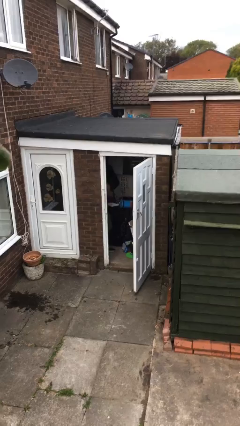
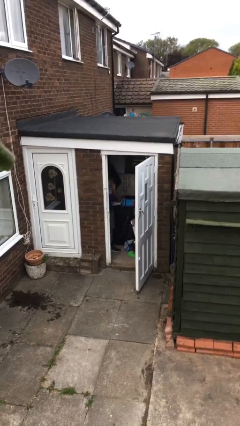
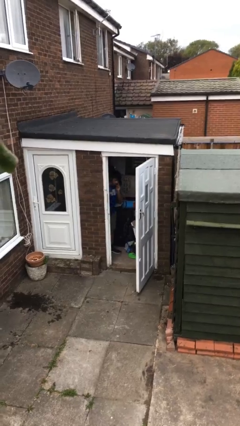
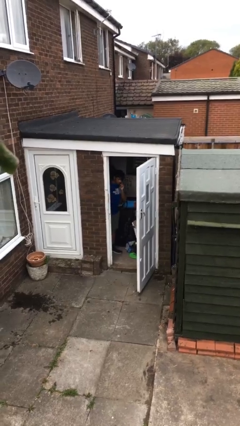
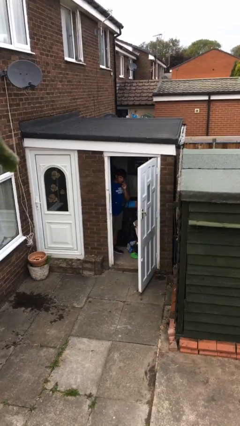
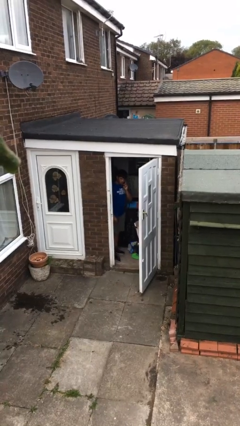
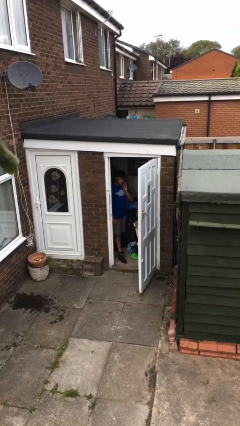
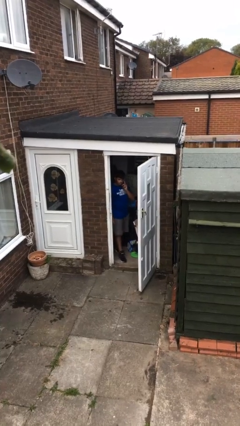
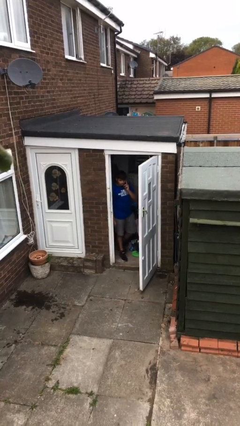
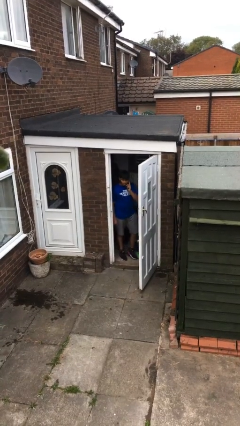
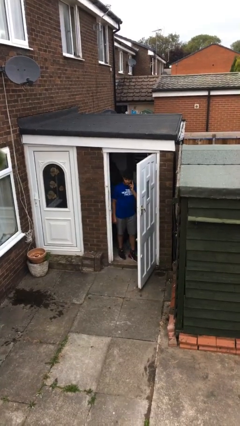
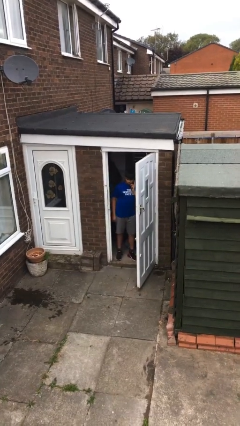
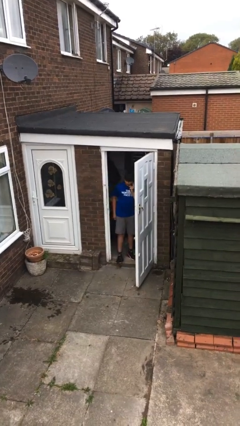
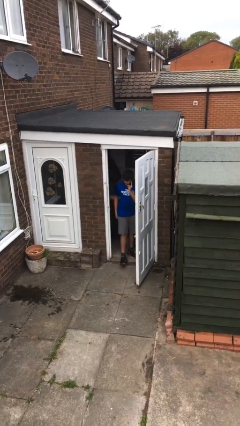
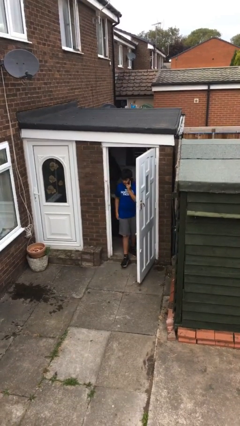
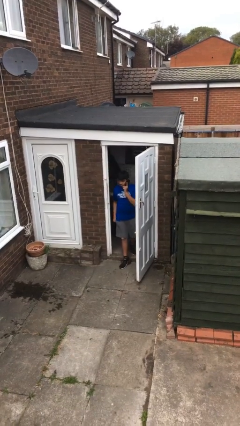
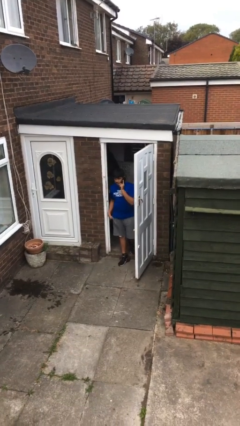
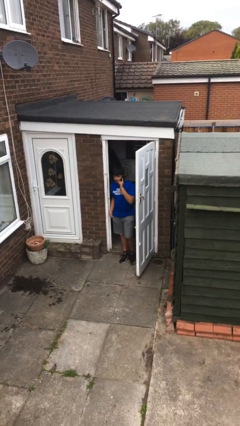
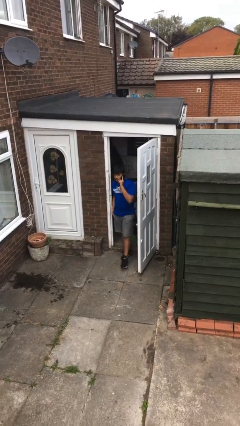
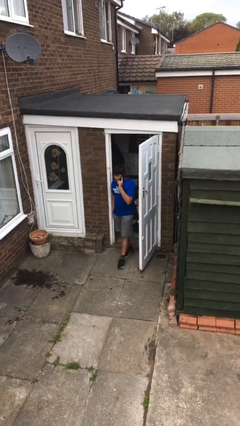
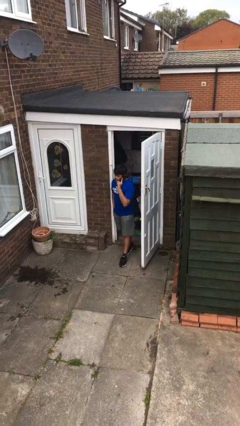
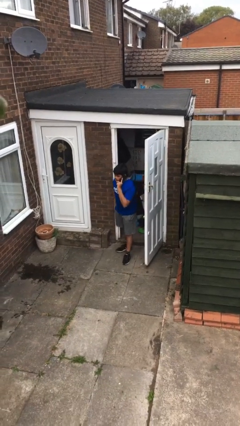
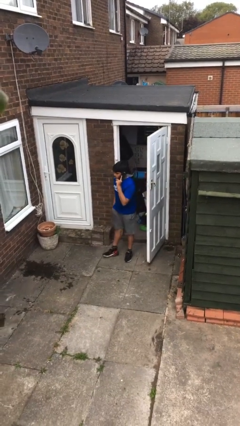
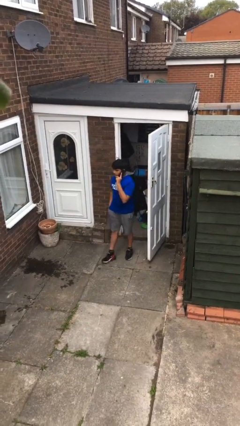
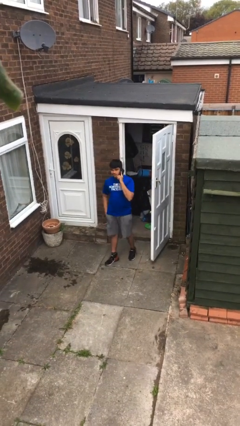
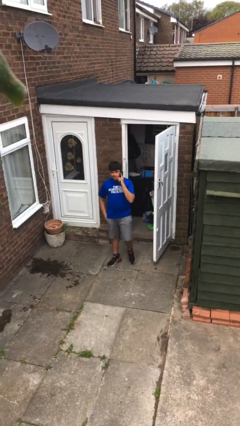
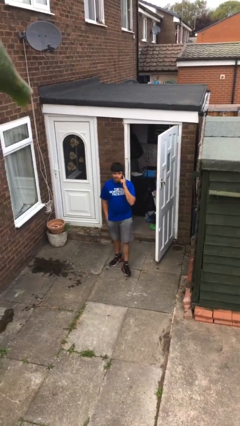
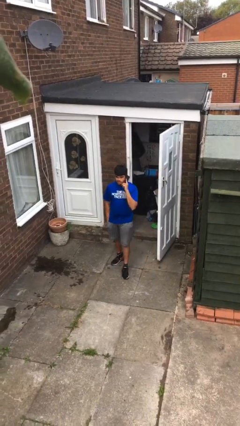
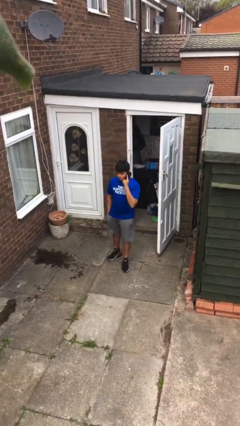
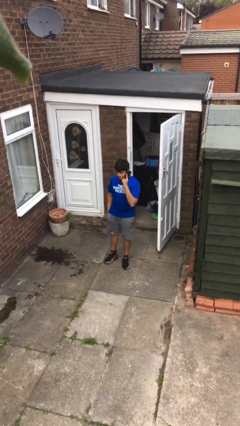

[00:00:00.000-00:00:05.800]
person enters scene through structure

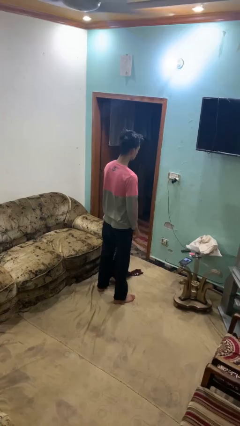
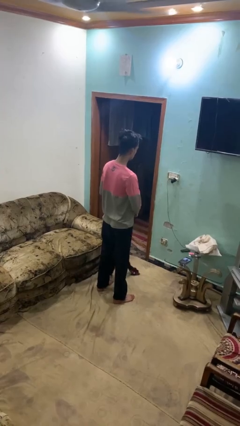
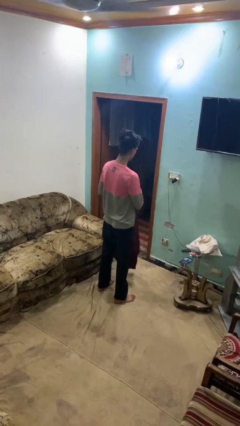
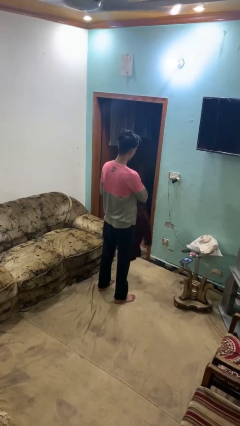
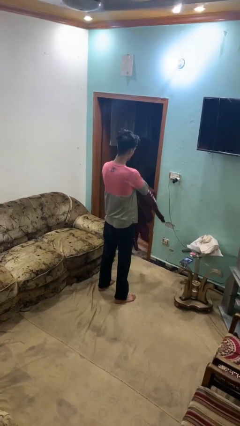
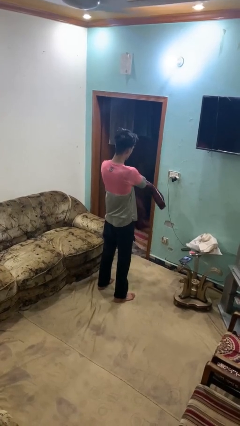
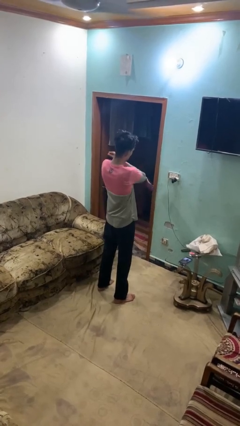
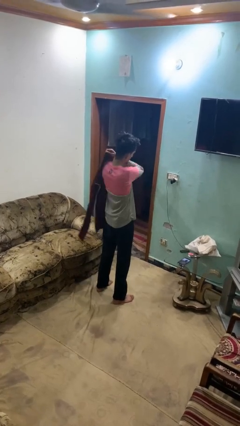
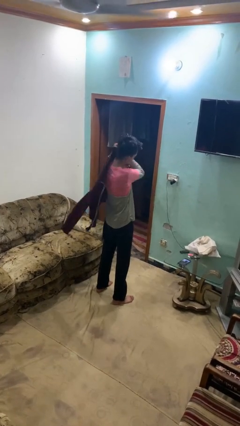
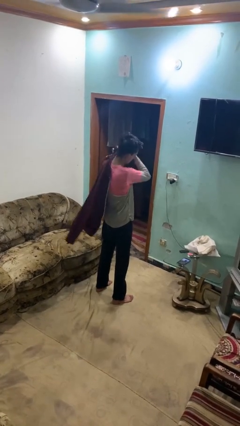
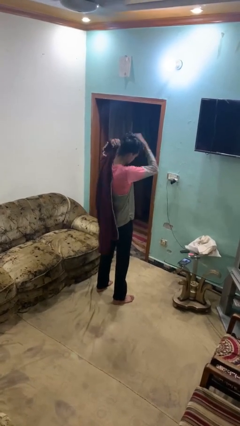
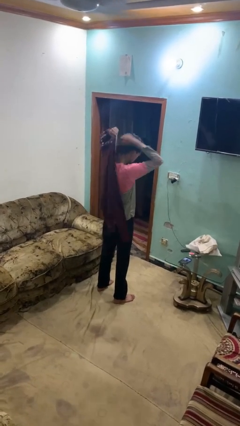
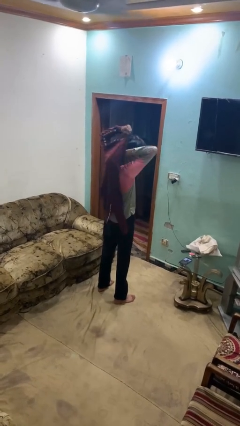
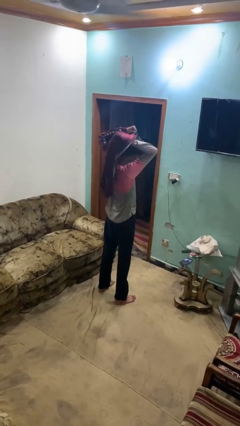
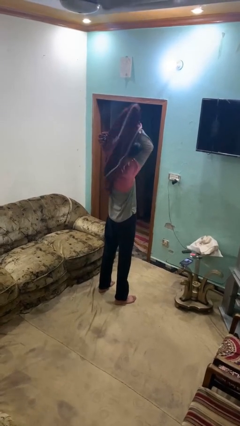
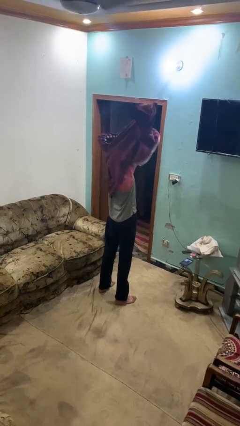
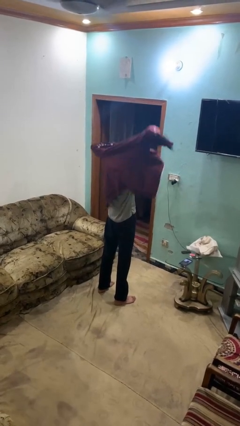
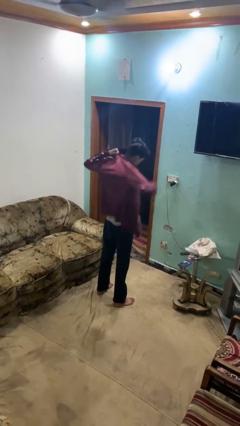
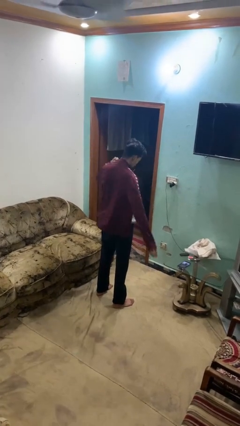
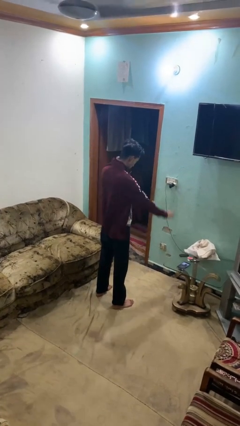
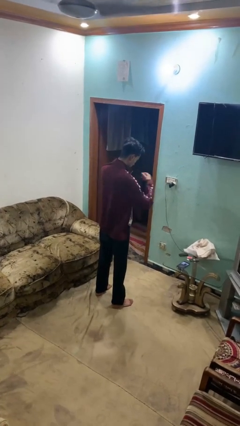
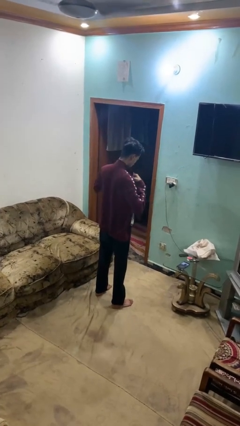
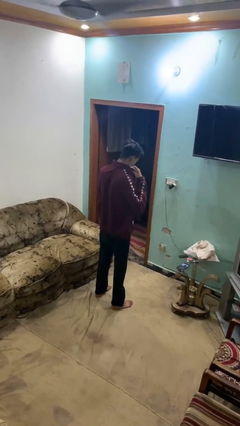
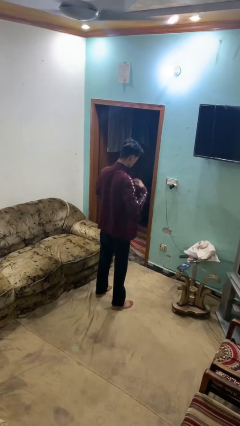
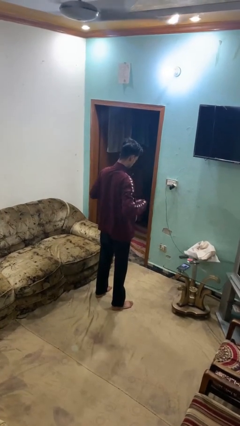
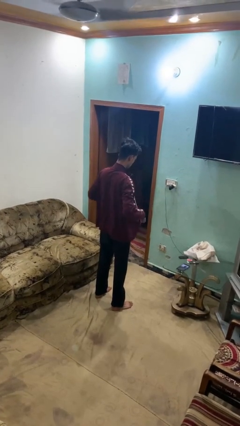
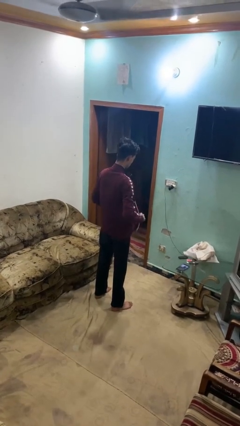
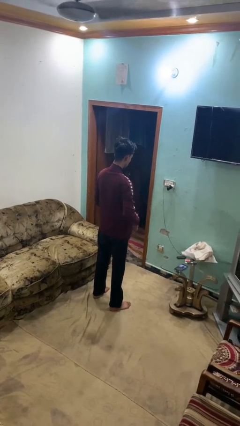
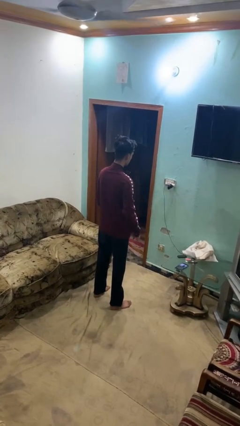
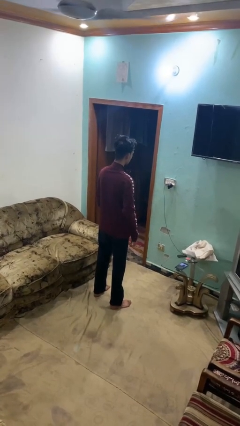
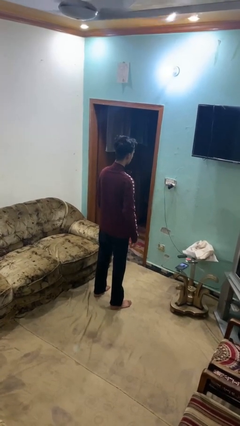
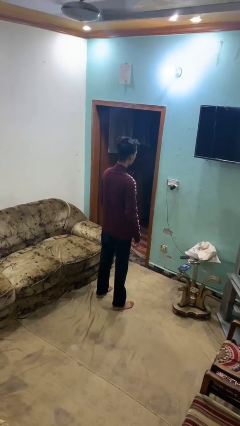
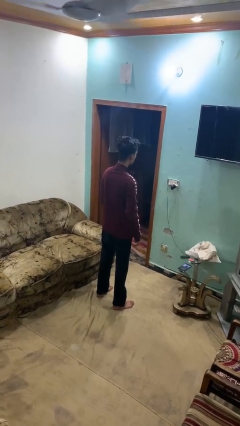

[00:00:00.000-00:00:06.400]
person puts on jacket

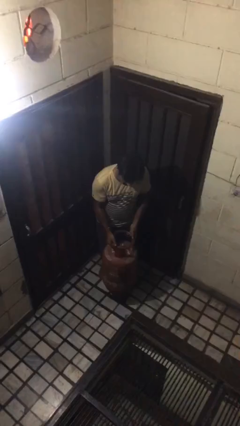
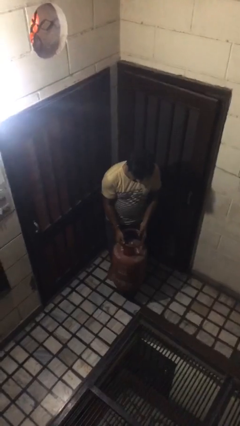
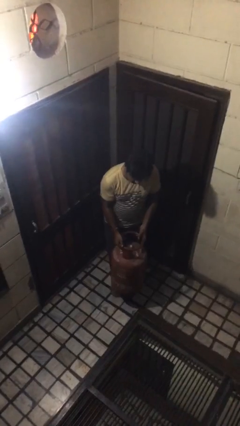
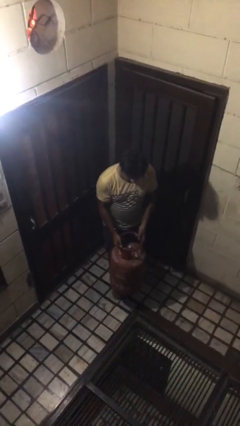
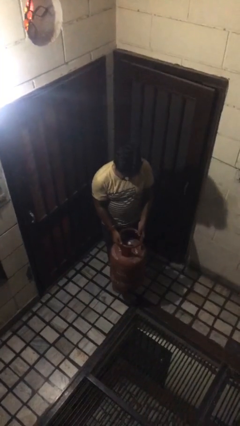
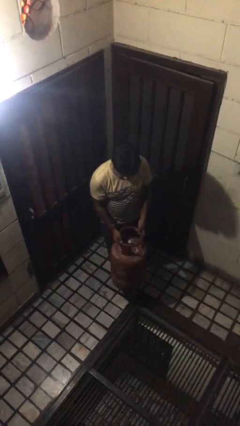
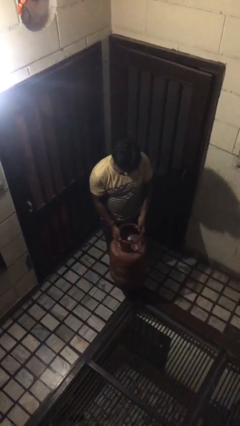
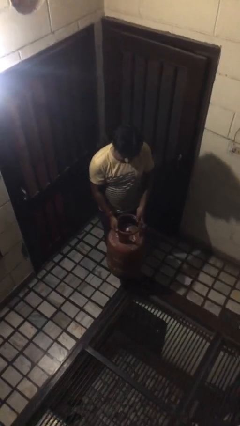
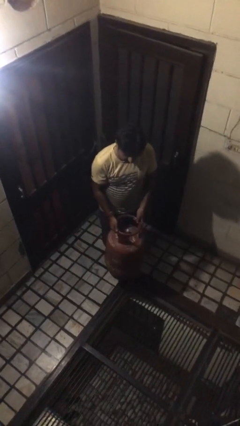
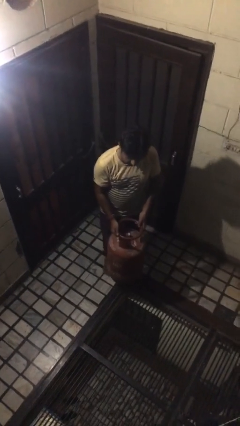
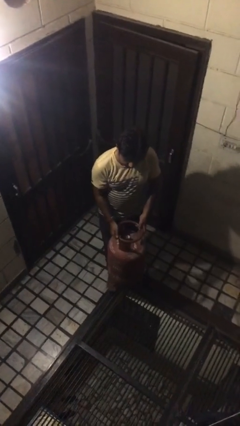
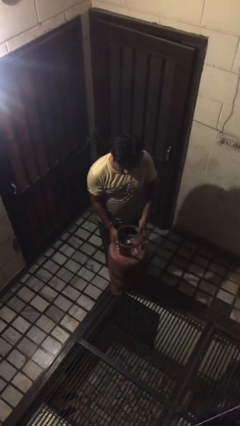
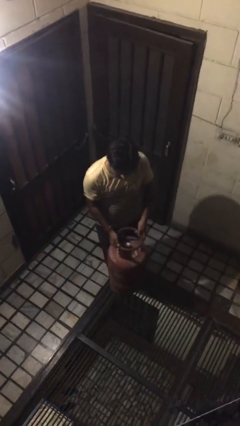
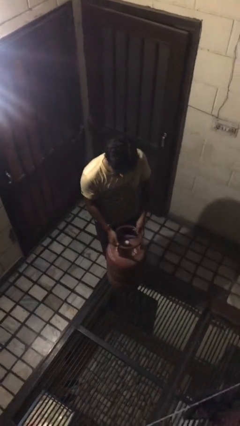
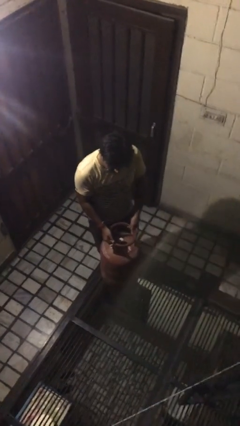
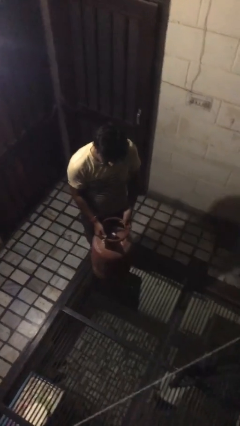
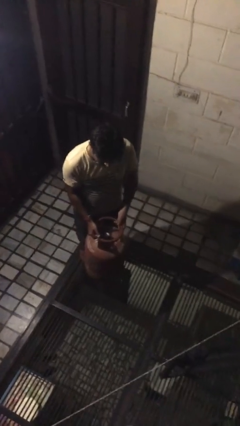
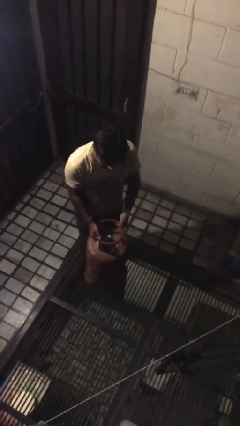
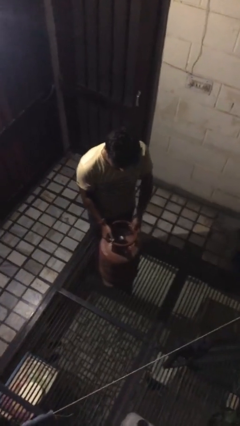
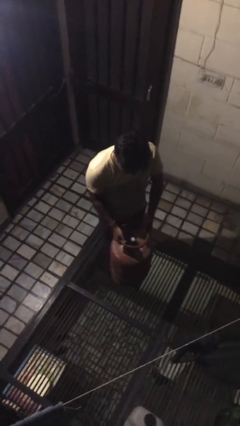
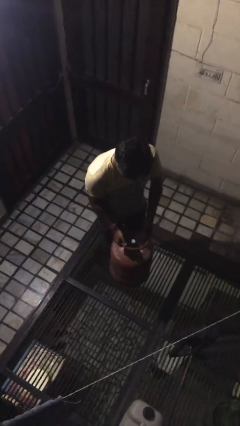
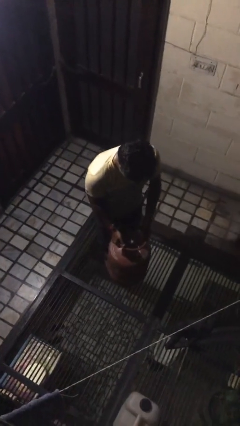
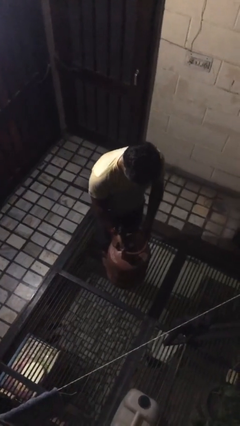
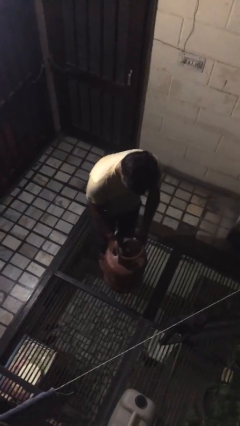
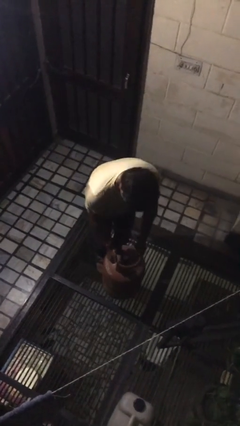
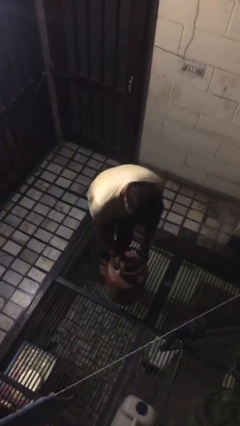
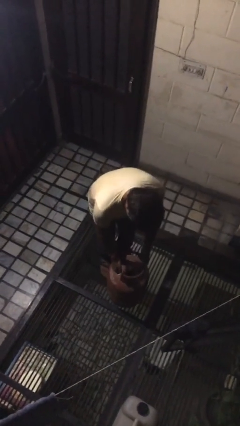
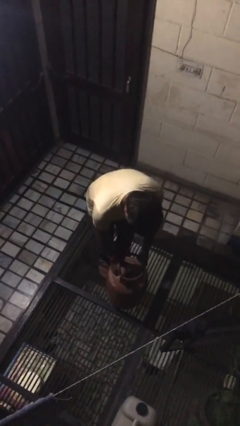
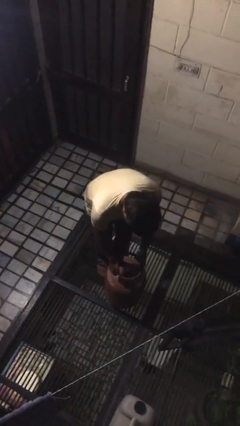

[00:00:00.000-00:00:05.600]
person carries heavy object
